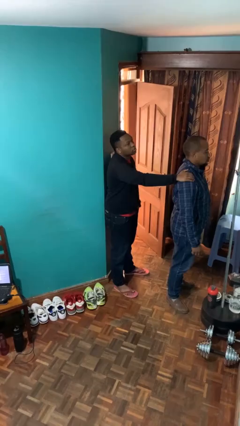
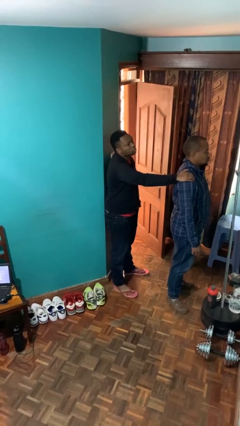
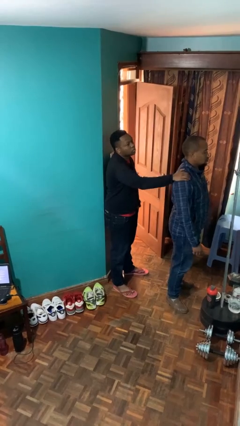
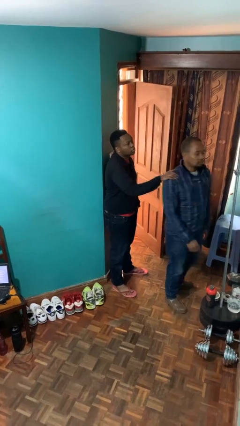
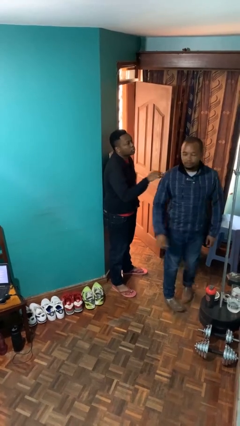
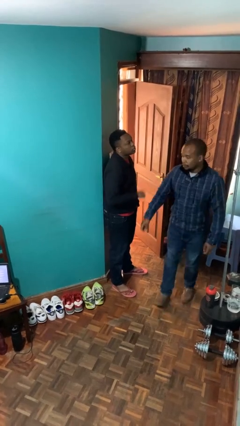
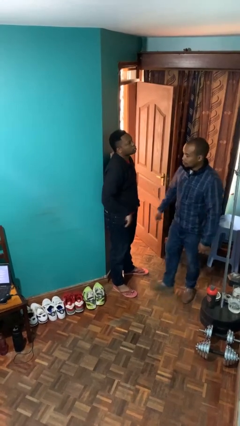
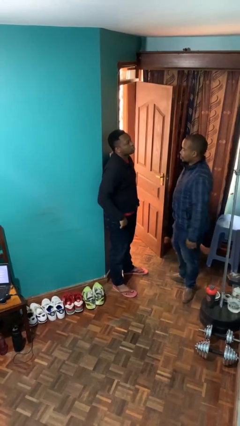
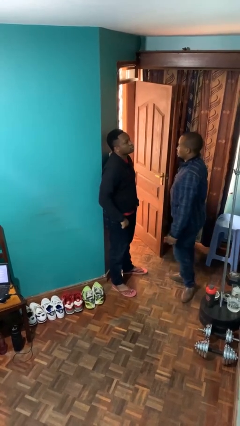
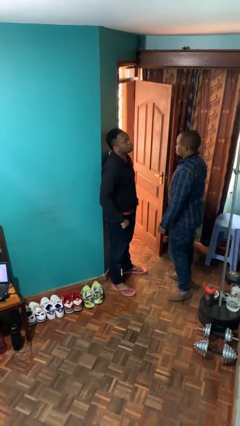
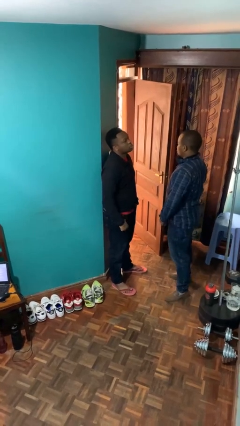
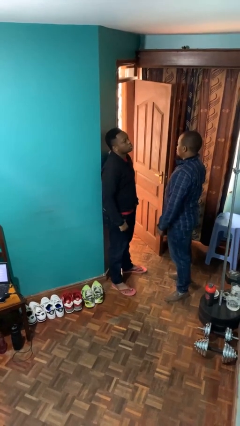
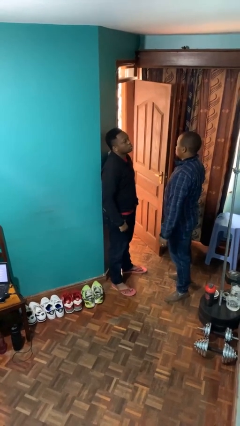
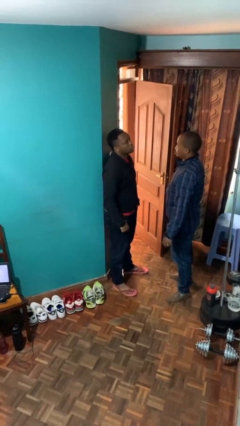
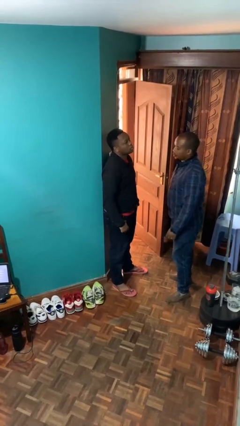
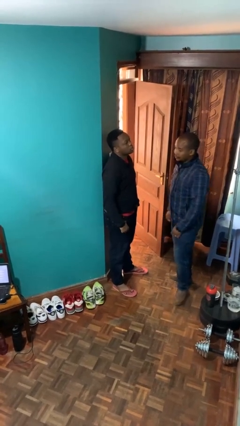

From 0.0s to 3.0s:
person spins person around

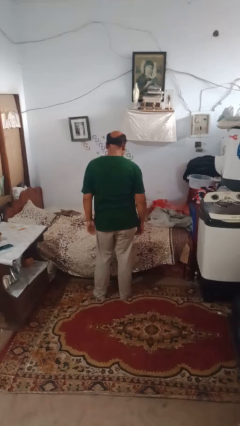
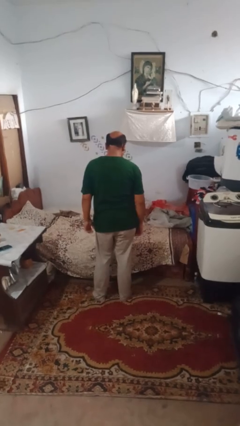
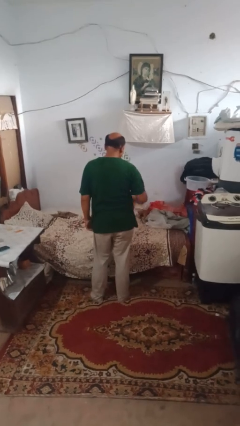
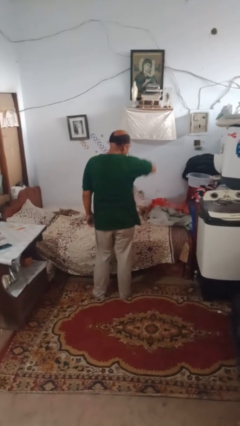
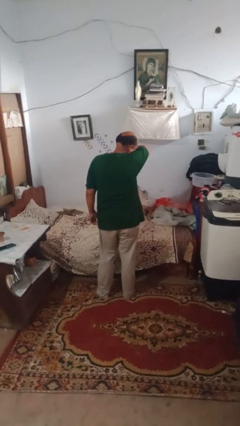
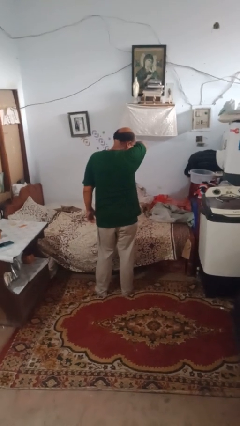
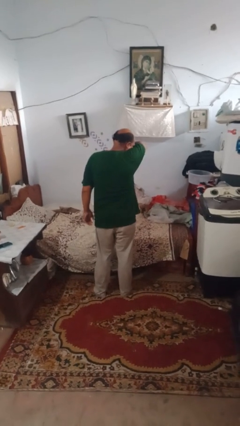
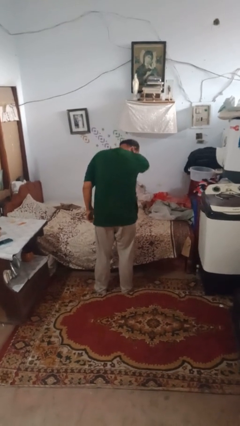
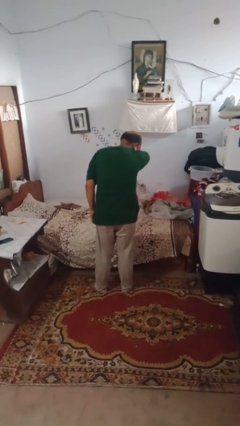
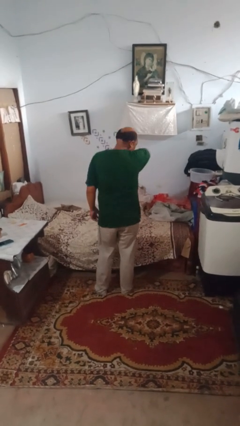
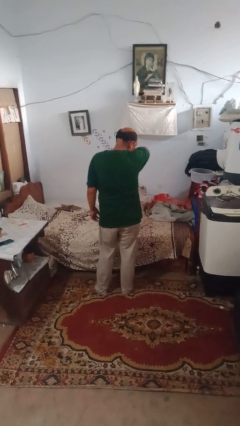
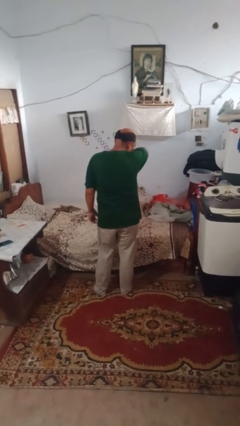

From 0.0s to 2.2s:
person sneezes into arm

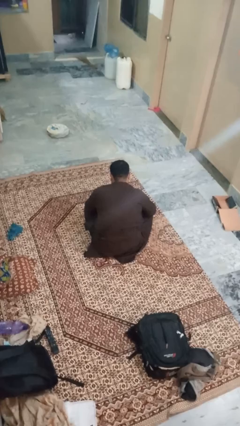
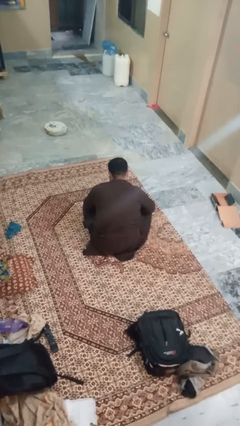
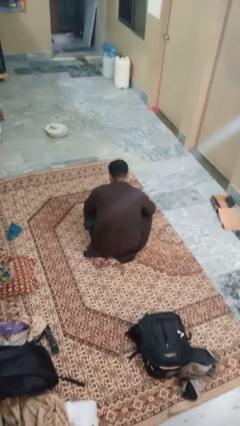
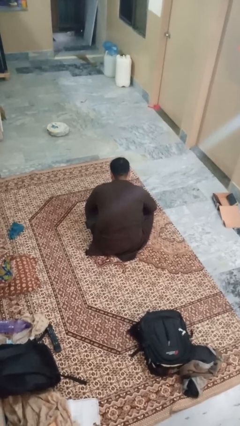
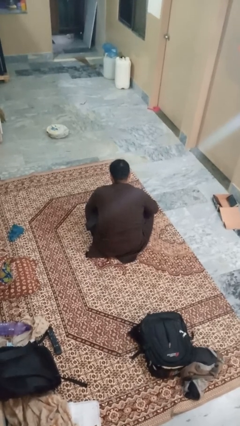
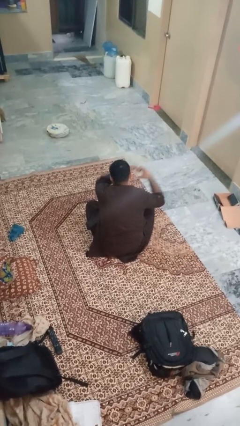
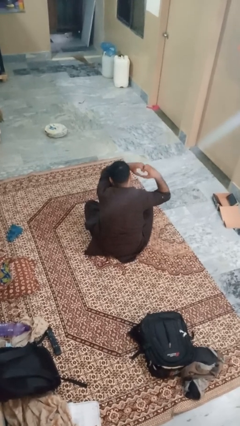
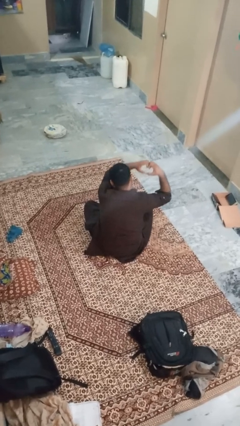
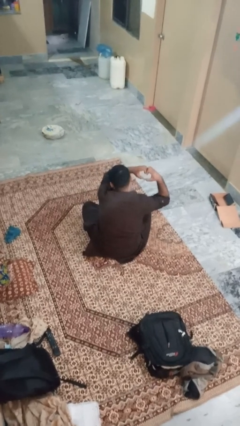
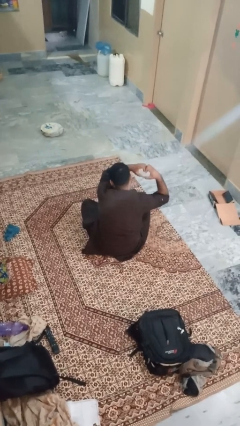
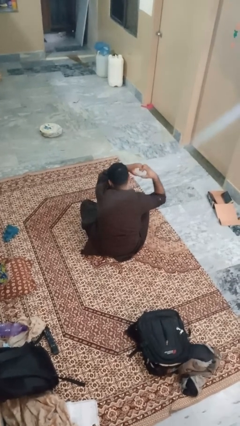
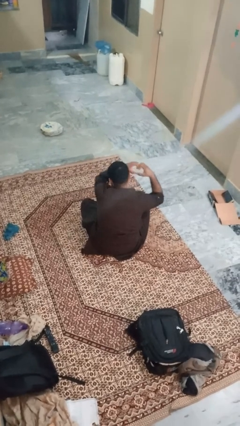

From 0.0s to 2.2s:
person gestures heart

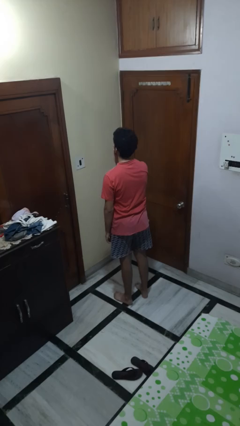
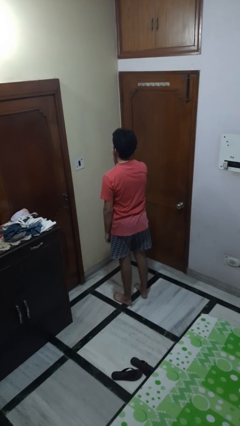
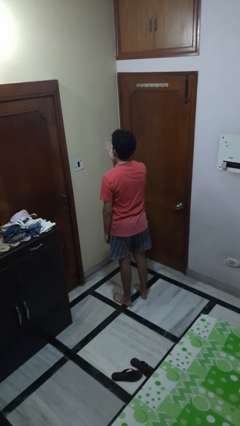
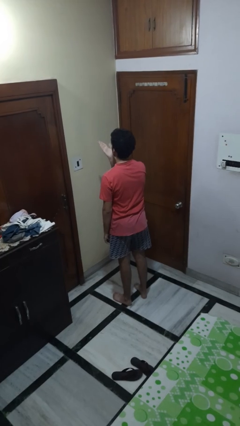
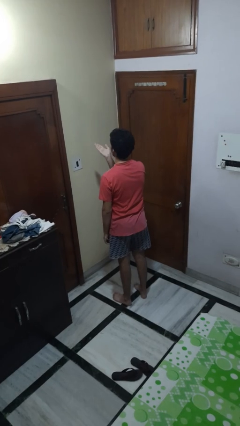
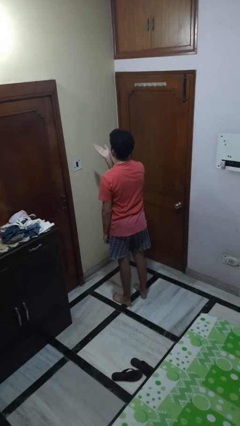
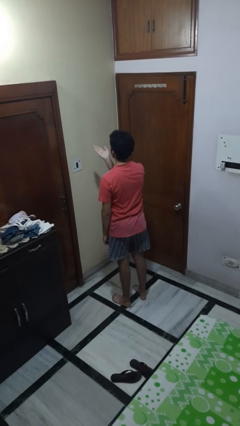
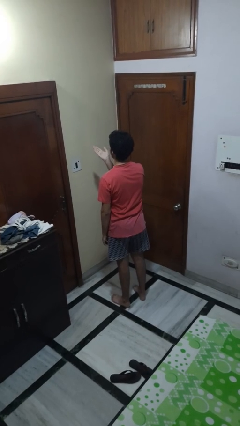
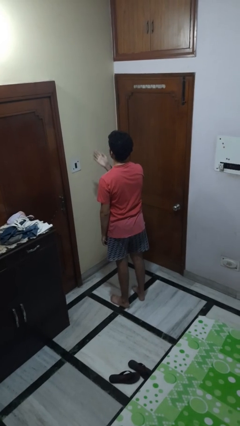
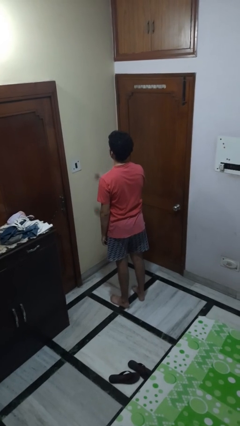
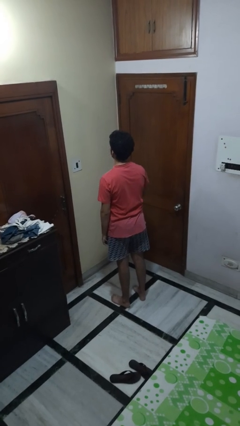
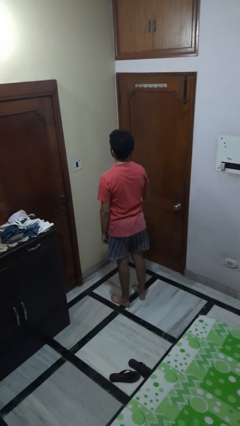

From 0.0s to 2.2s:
person gestures blow kiss

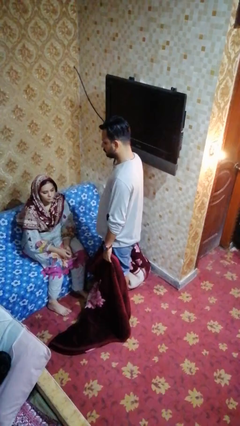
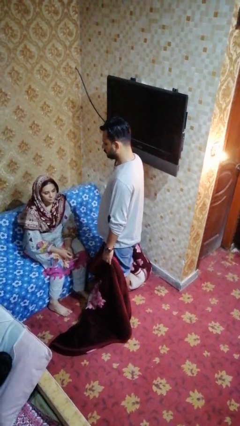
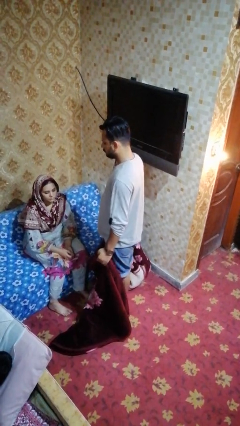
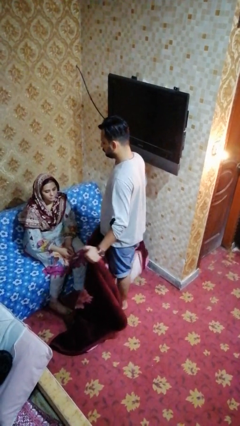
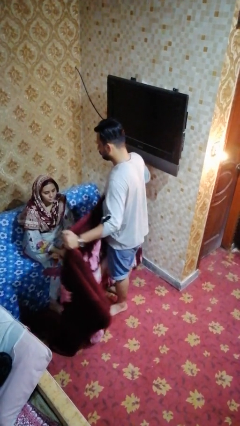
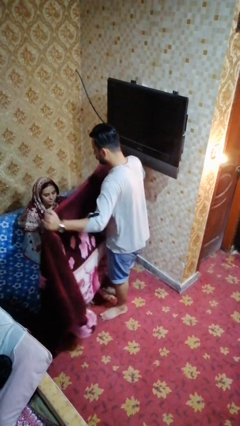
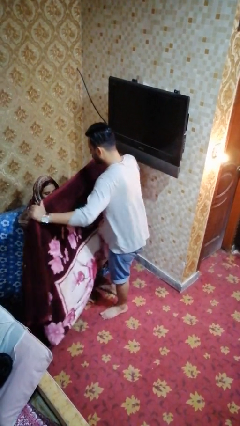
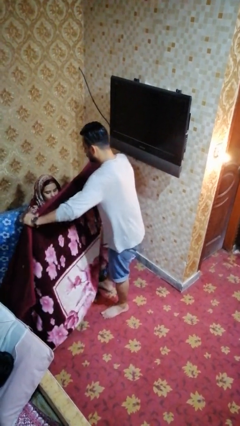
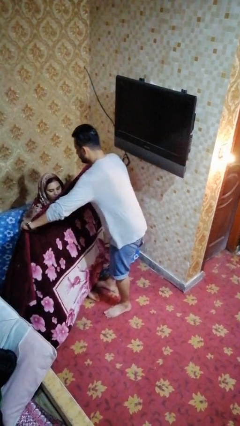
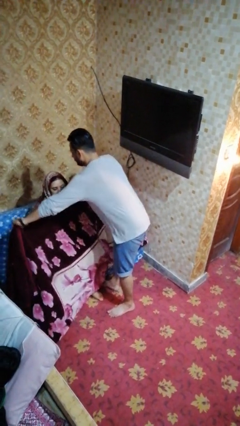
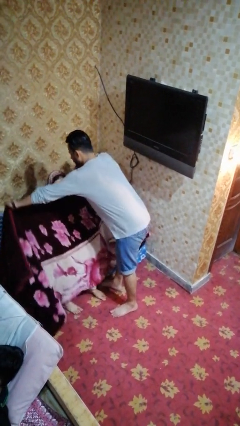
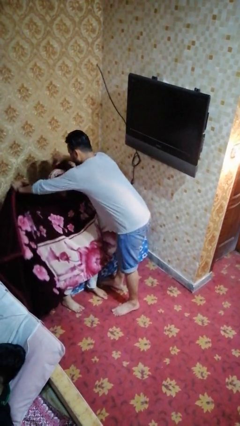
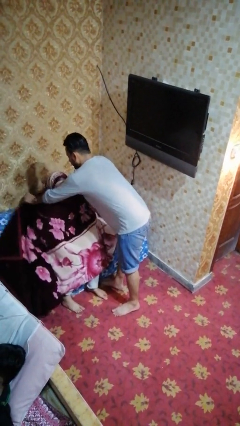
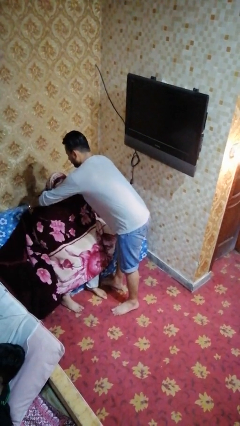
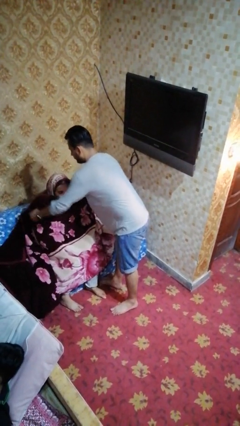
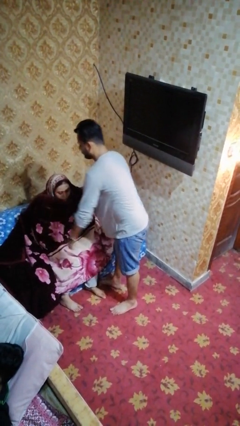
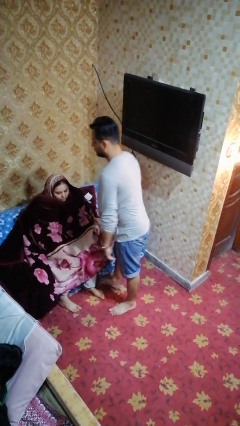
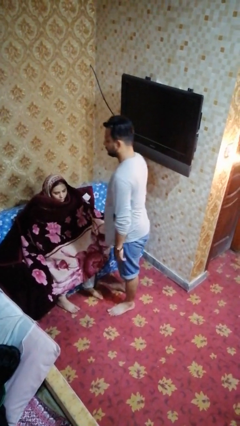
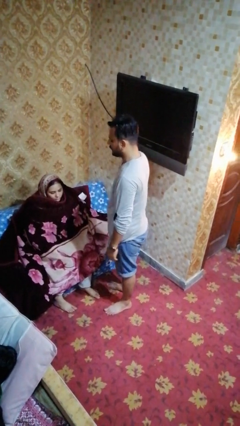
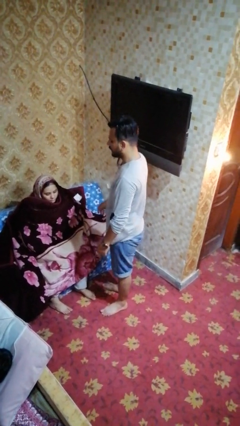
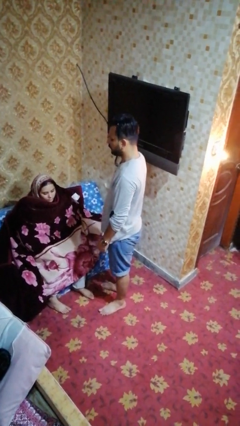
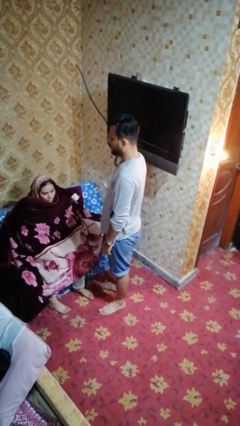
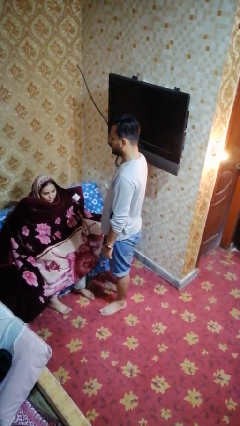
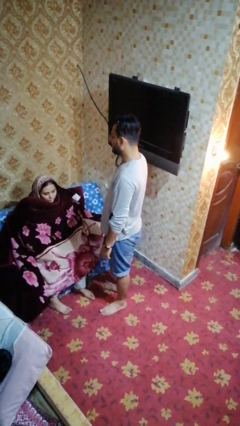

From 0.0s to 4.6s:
person covers friend with blanket

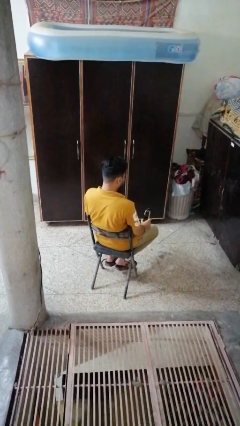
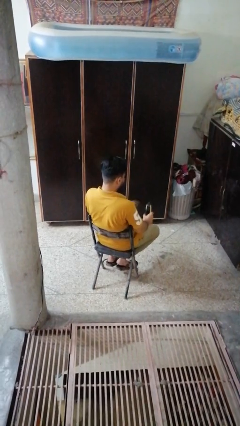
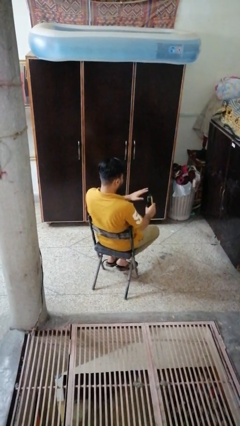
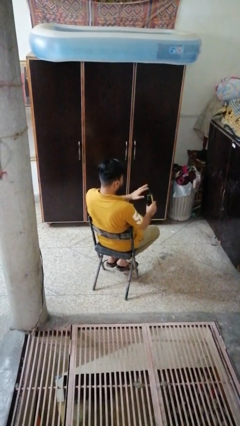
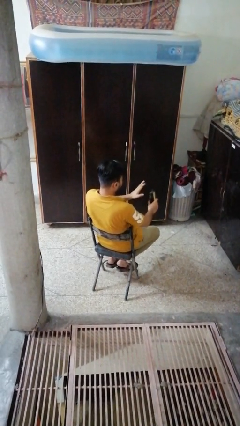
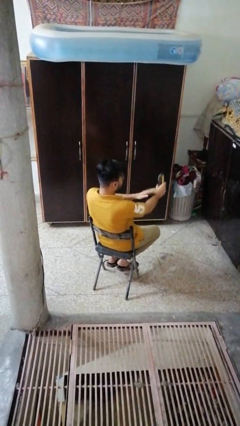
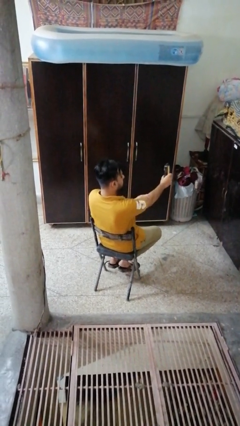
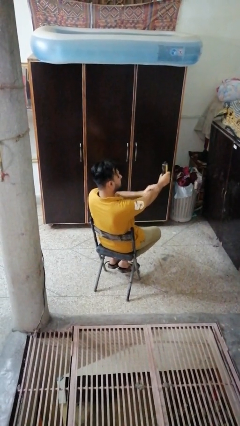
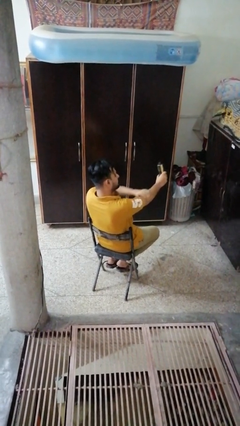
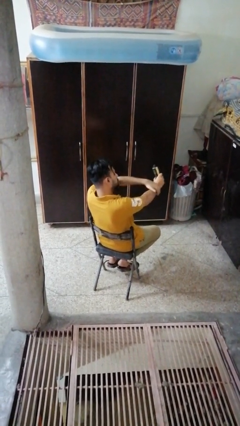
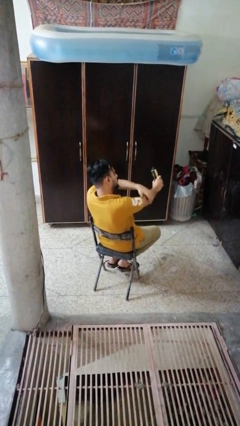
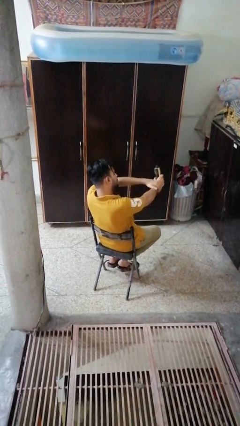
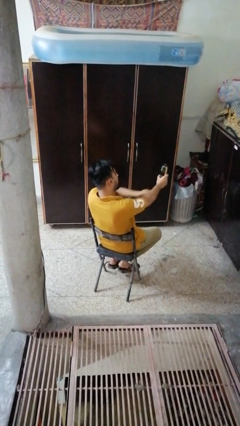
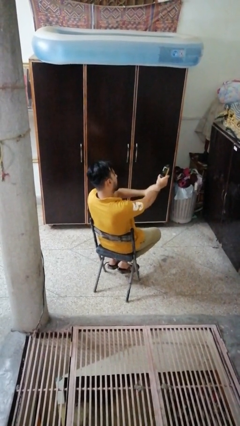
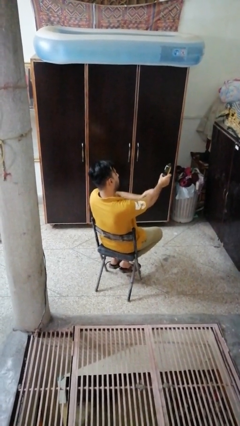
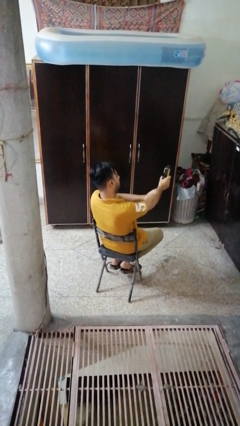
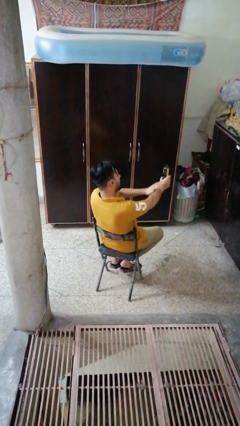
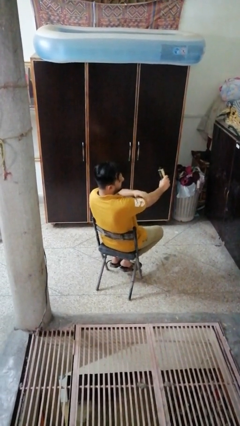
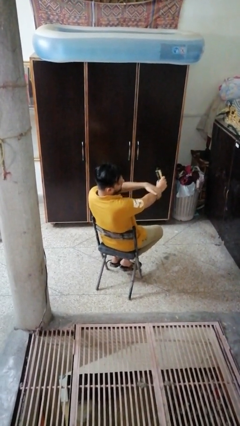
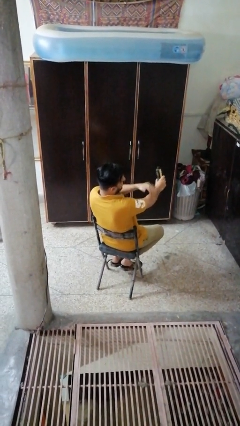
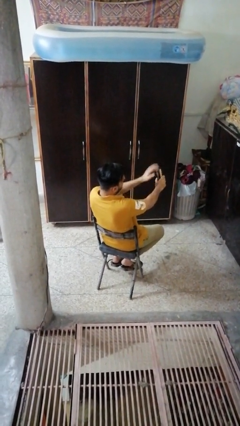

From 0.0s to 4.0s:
person applies sunscreen
